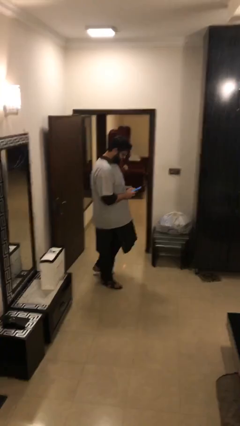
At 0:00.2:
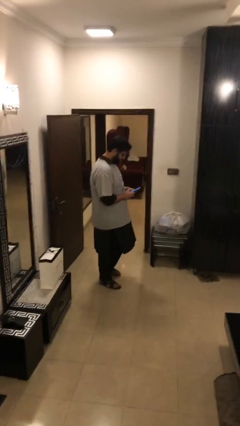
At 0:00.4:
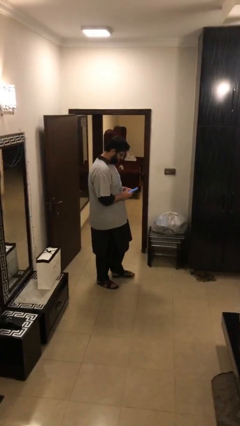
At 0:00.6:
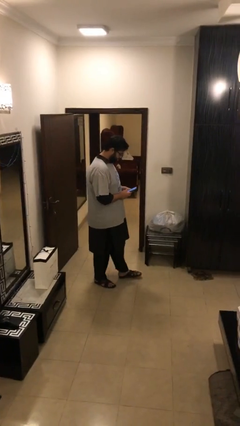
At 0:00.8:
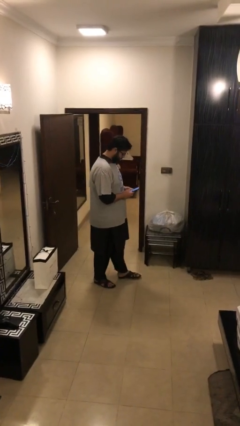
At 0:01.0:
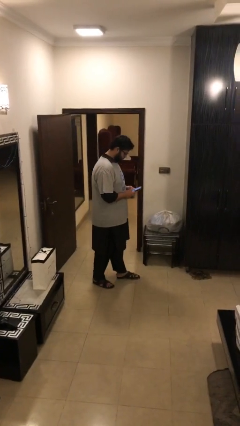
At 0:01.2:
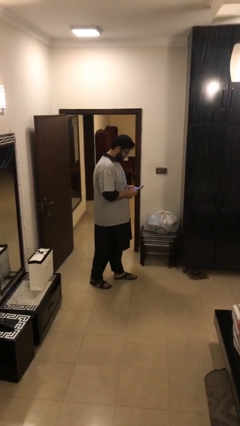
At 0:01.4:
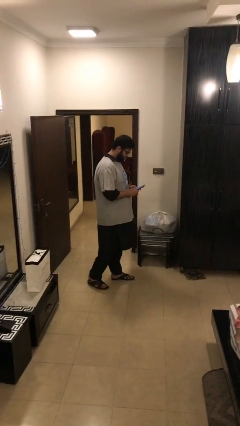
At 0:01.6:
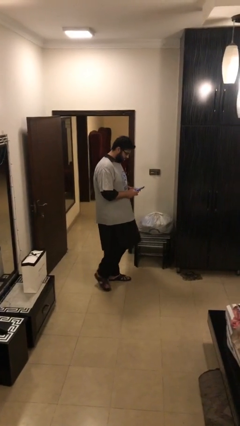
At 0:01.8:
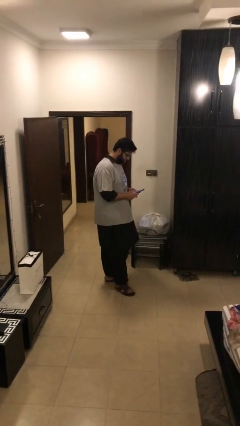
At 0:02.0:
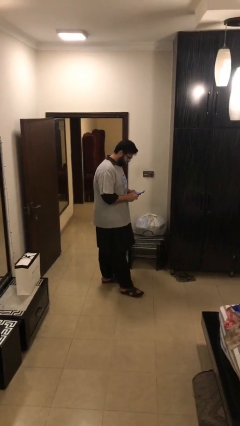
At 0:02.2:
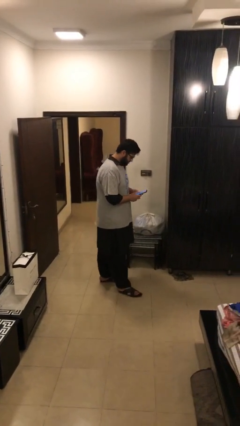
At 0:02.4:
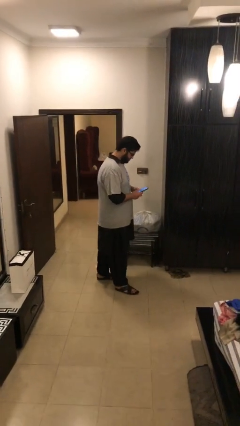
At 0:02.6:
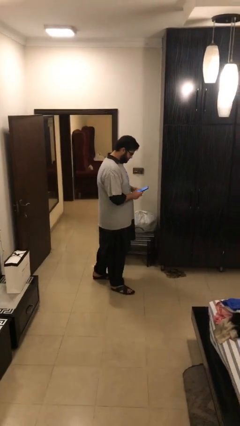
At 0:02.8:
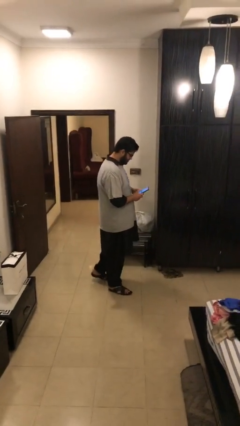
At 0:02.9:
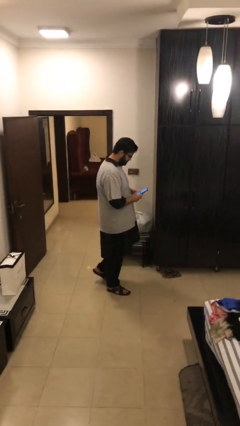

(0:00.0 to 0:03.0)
person texts on phone

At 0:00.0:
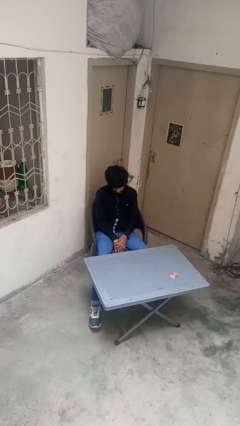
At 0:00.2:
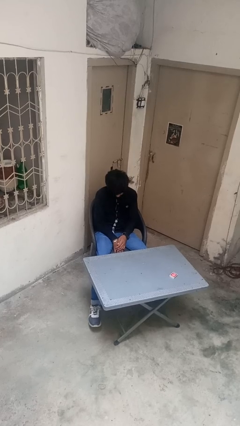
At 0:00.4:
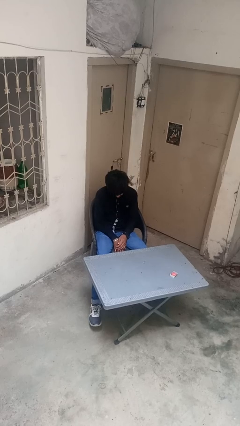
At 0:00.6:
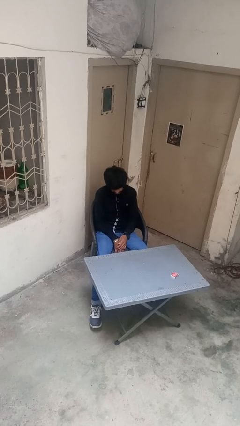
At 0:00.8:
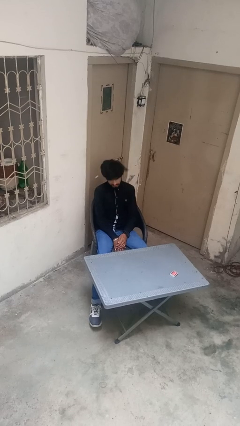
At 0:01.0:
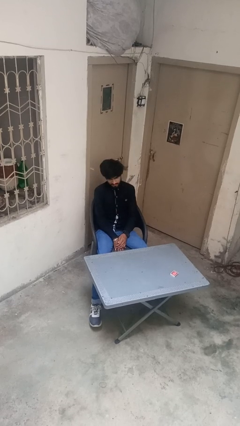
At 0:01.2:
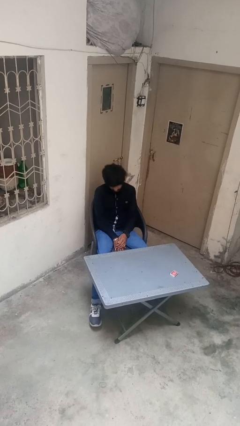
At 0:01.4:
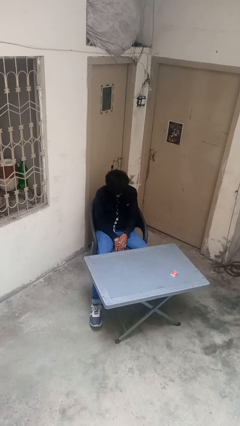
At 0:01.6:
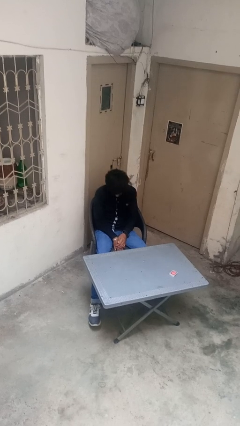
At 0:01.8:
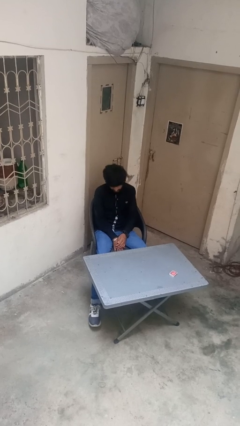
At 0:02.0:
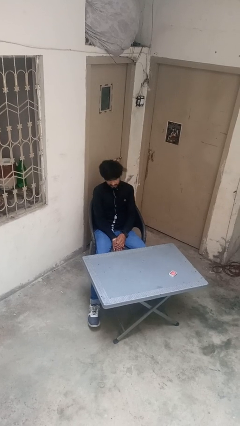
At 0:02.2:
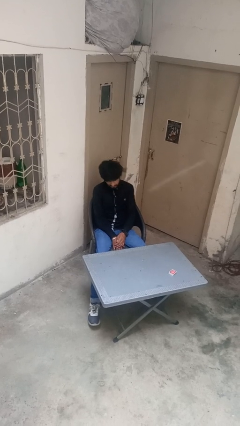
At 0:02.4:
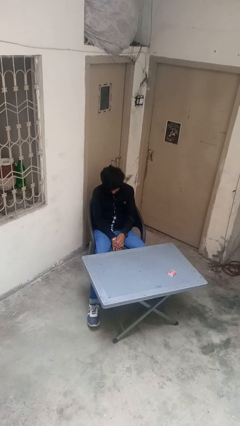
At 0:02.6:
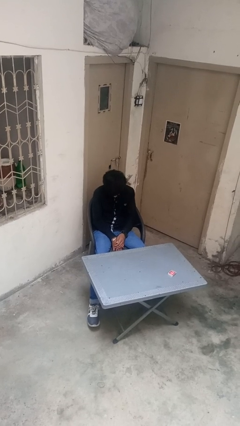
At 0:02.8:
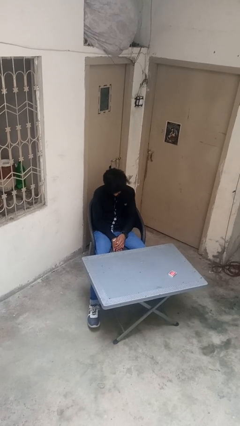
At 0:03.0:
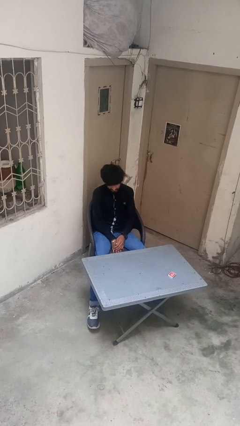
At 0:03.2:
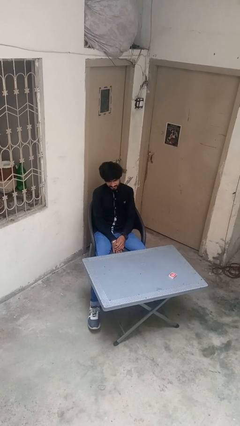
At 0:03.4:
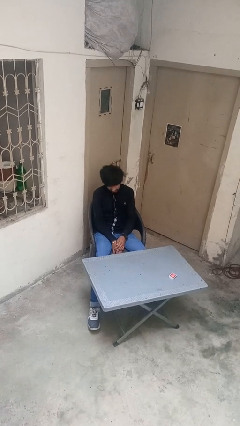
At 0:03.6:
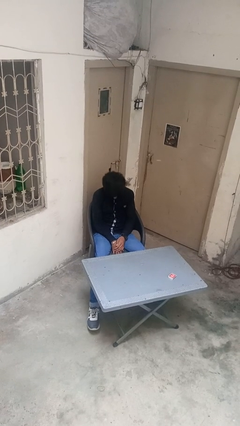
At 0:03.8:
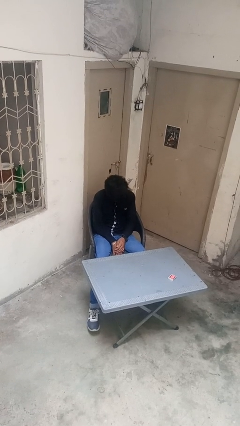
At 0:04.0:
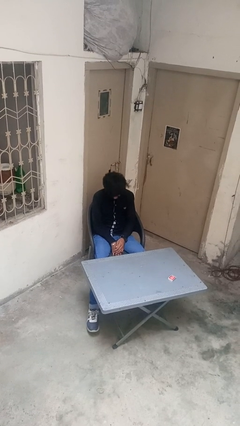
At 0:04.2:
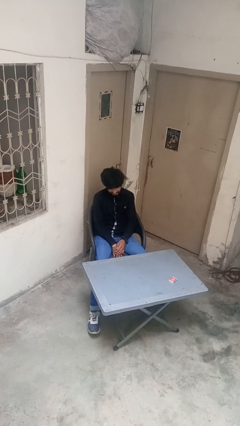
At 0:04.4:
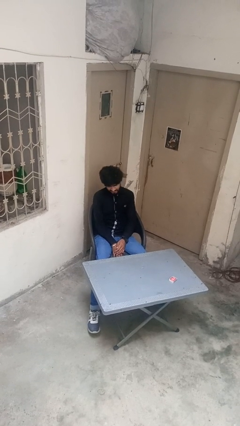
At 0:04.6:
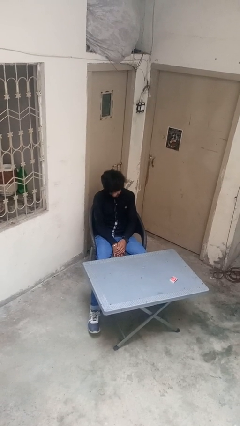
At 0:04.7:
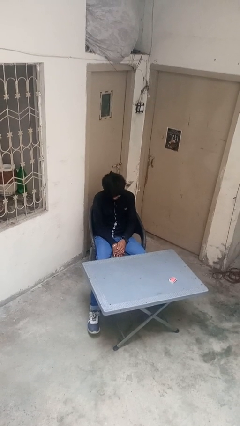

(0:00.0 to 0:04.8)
person nods head

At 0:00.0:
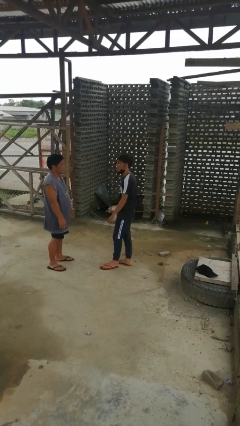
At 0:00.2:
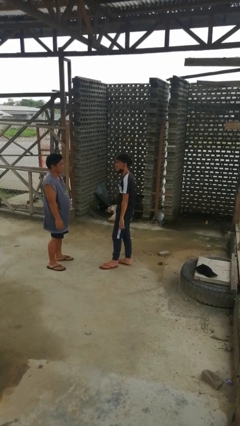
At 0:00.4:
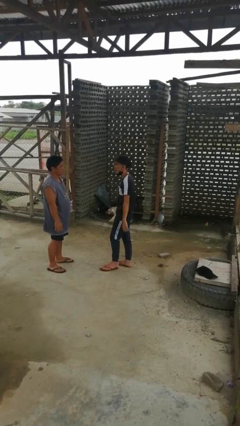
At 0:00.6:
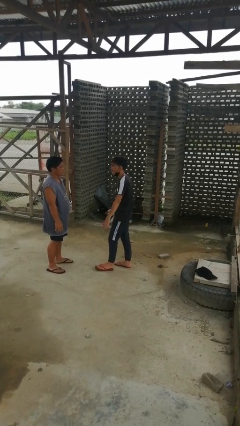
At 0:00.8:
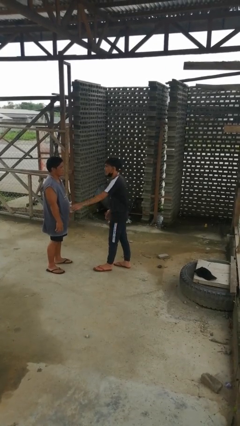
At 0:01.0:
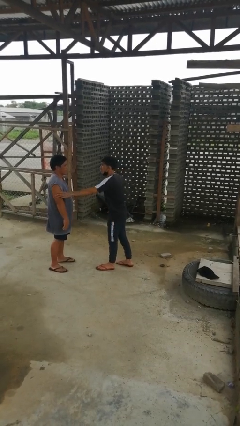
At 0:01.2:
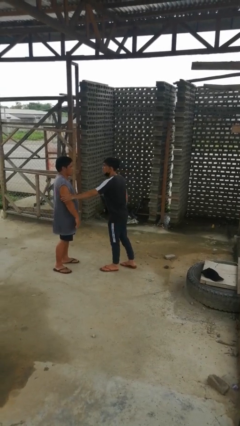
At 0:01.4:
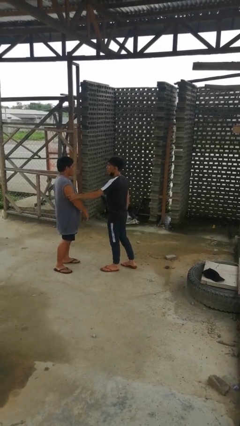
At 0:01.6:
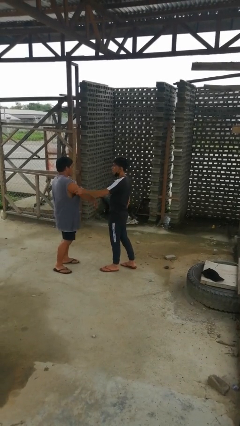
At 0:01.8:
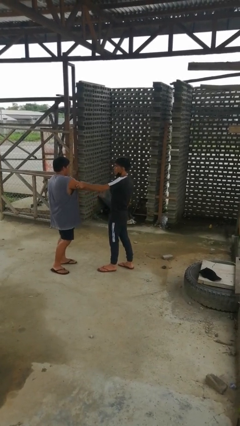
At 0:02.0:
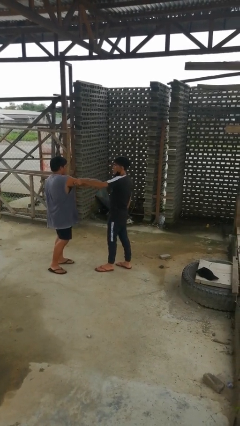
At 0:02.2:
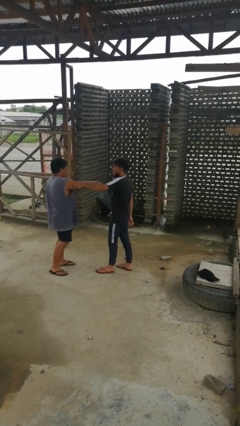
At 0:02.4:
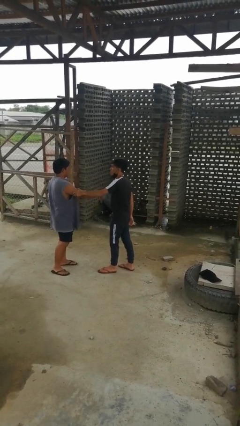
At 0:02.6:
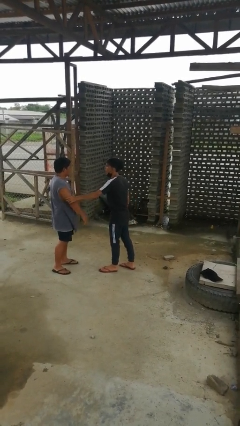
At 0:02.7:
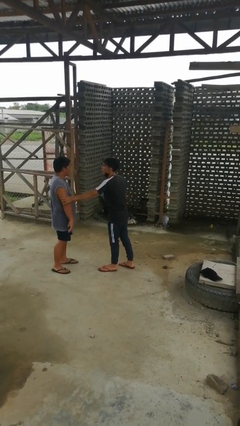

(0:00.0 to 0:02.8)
person grabs person by bicep

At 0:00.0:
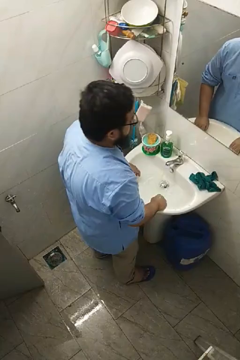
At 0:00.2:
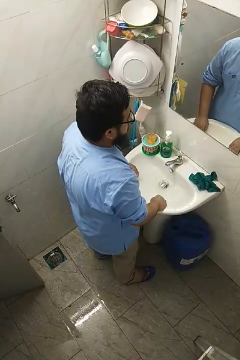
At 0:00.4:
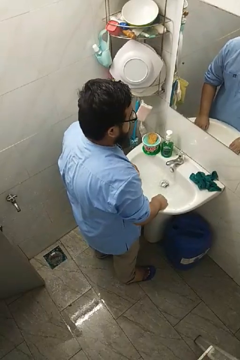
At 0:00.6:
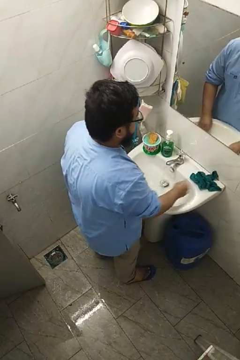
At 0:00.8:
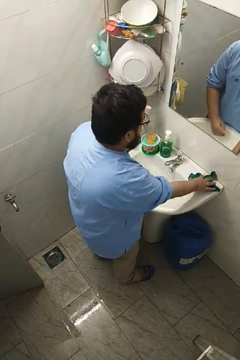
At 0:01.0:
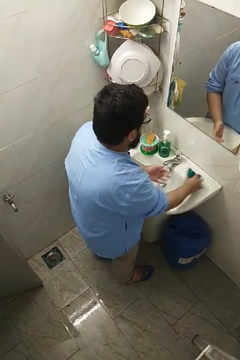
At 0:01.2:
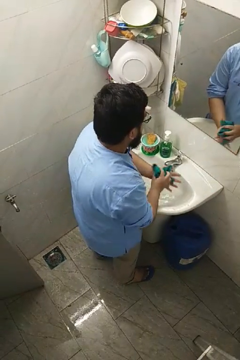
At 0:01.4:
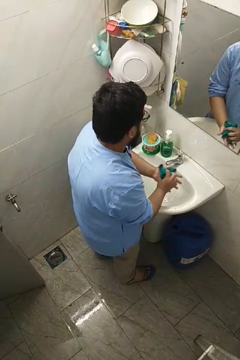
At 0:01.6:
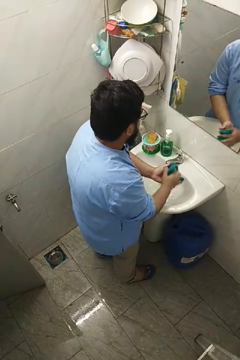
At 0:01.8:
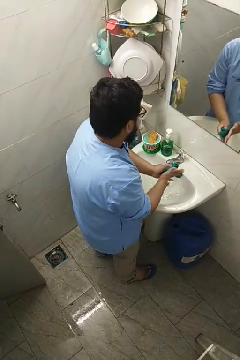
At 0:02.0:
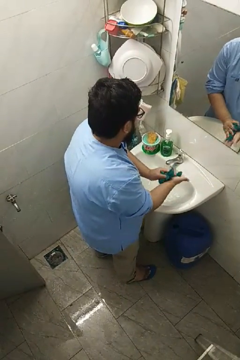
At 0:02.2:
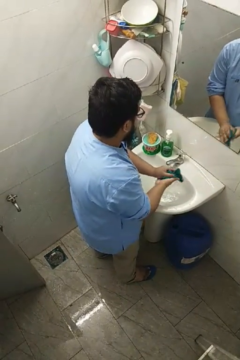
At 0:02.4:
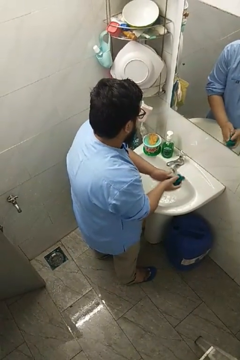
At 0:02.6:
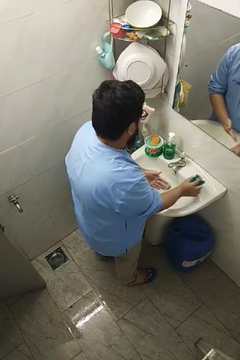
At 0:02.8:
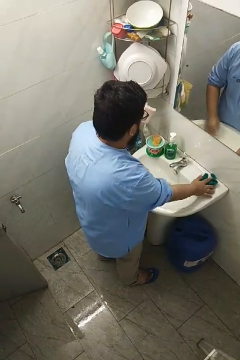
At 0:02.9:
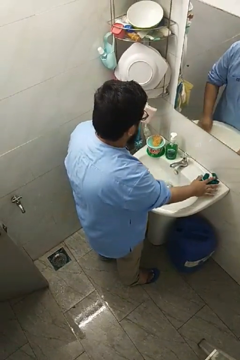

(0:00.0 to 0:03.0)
person dries hands with towel

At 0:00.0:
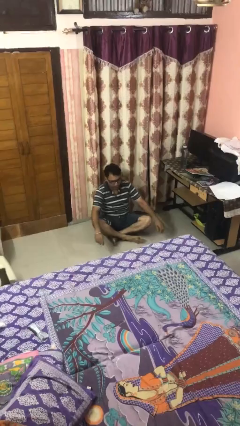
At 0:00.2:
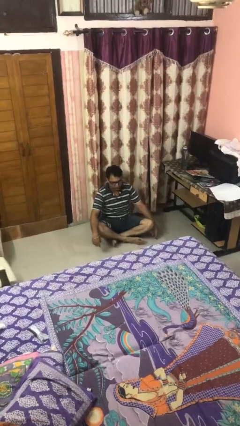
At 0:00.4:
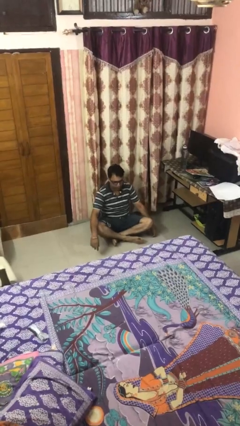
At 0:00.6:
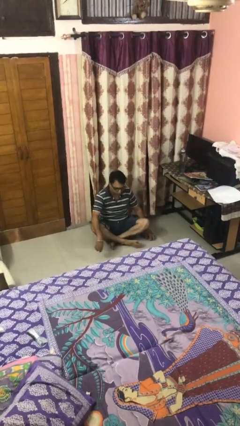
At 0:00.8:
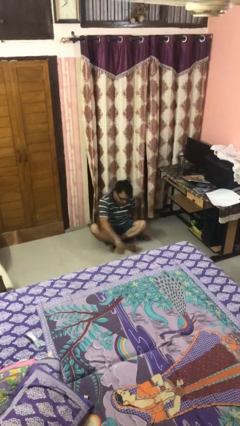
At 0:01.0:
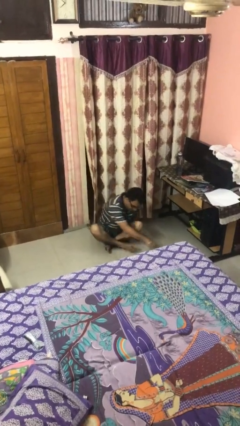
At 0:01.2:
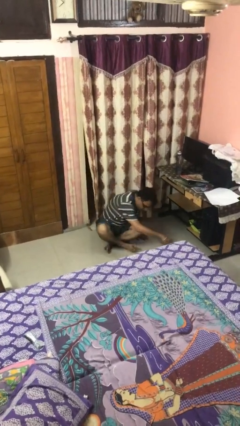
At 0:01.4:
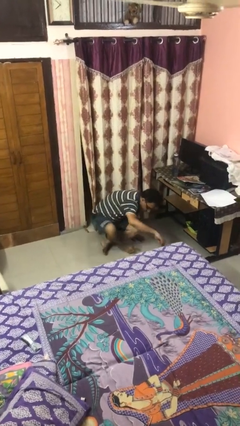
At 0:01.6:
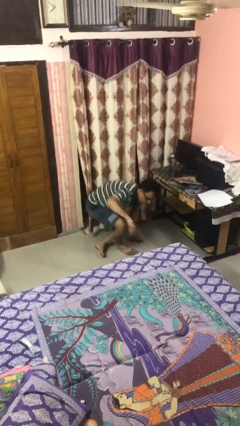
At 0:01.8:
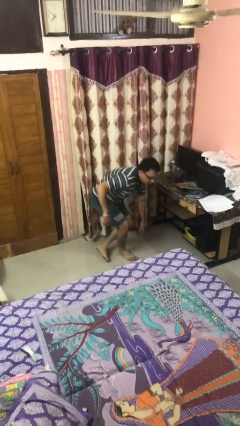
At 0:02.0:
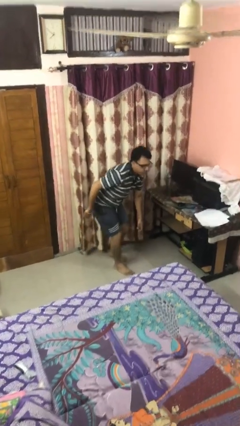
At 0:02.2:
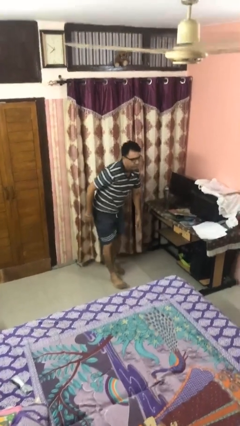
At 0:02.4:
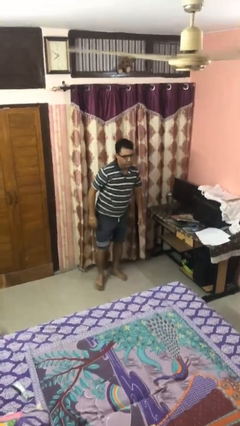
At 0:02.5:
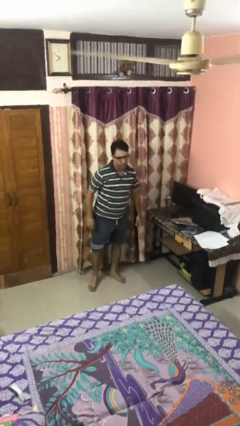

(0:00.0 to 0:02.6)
person stands up from floor

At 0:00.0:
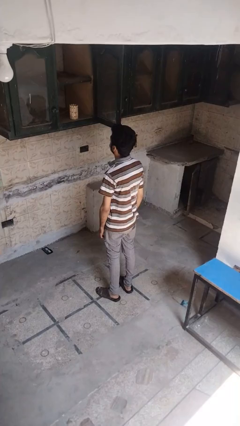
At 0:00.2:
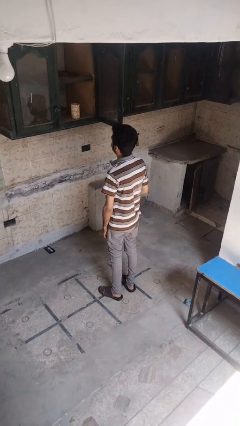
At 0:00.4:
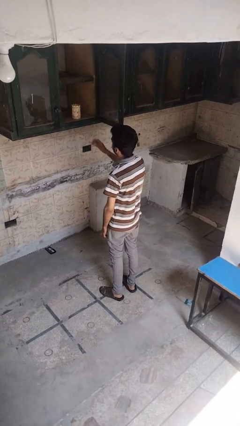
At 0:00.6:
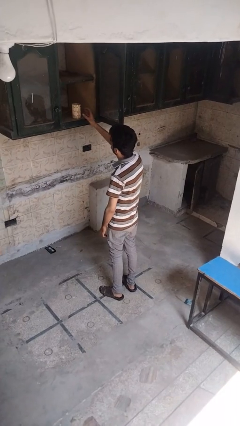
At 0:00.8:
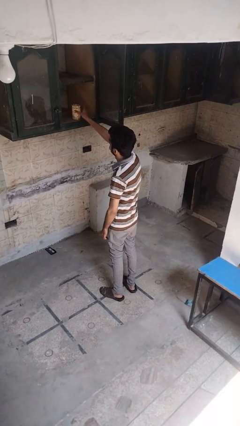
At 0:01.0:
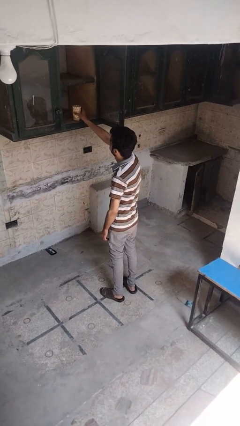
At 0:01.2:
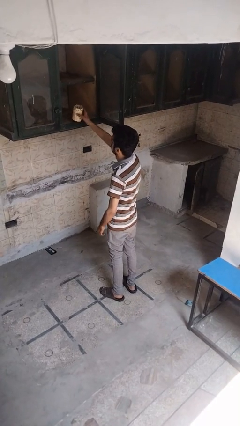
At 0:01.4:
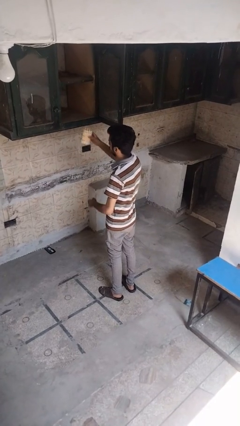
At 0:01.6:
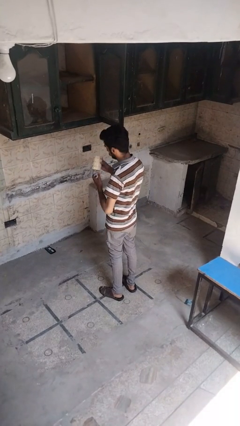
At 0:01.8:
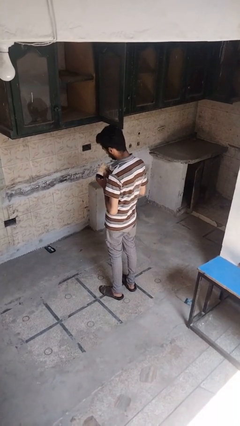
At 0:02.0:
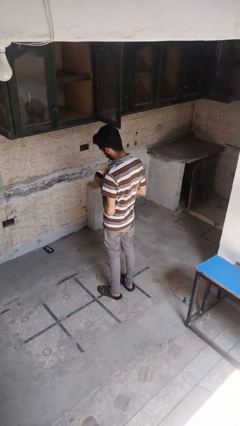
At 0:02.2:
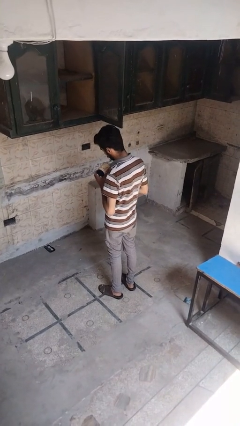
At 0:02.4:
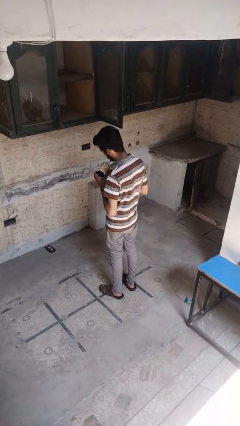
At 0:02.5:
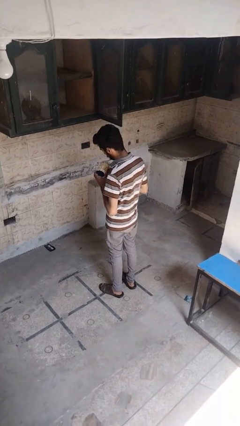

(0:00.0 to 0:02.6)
person picks up object from cabinet
